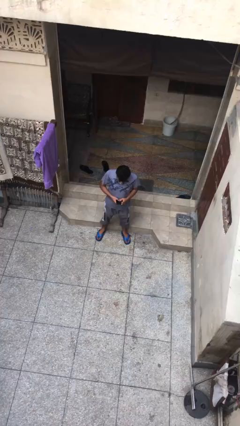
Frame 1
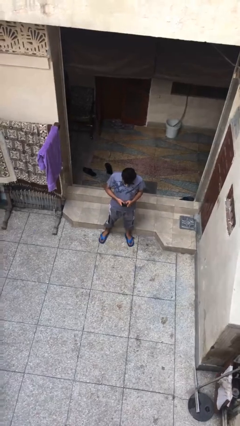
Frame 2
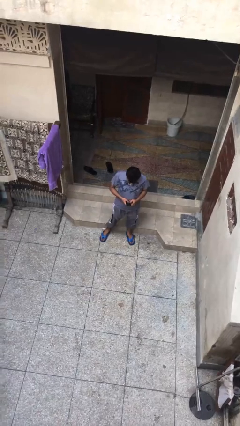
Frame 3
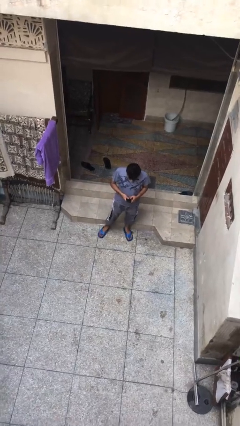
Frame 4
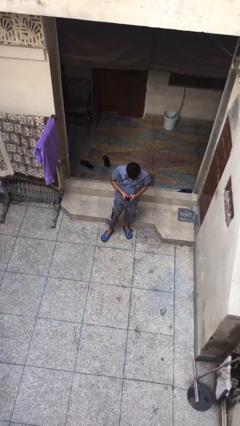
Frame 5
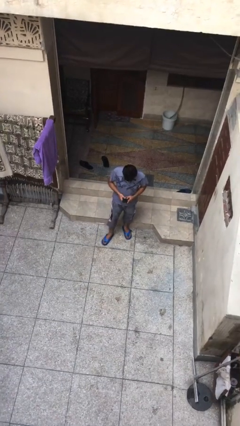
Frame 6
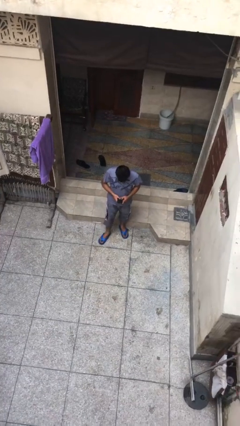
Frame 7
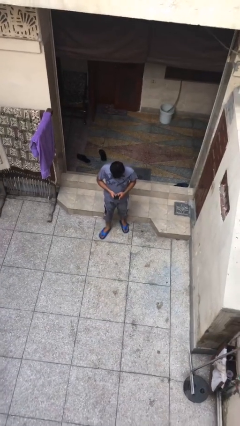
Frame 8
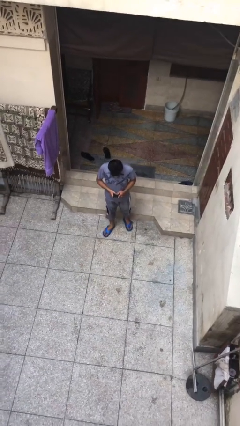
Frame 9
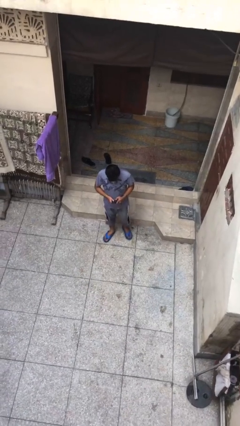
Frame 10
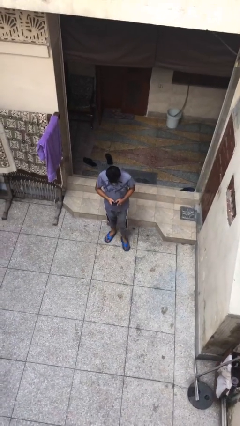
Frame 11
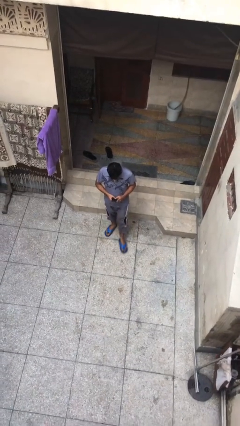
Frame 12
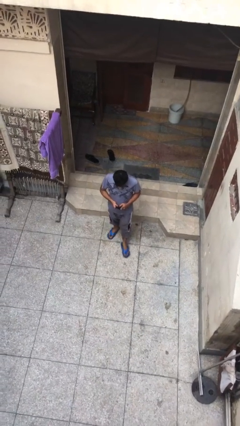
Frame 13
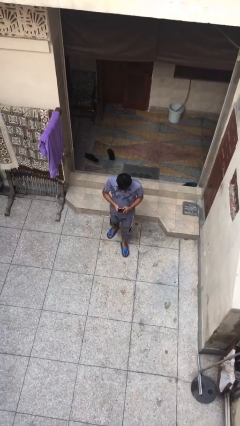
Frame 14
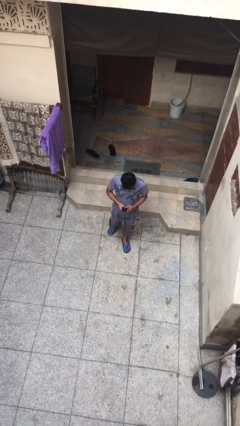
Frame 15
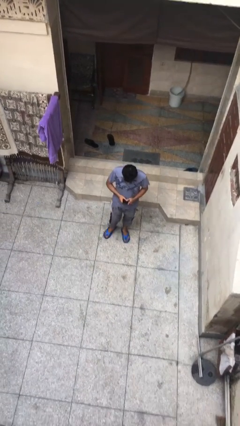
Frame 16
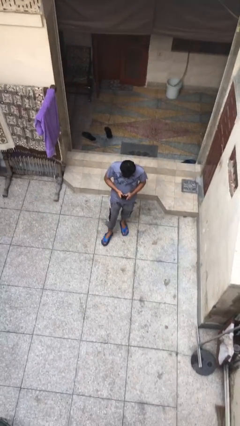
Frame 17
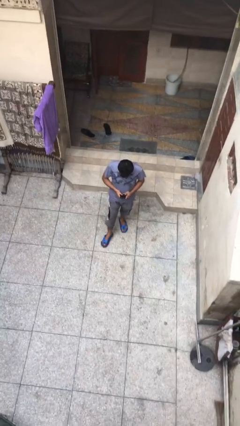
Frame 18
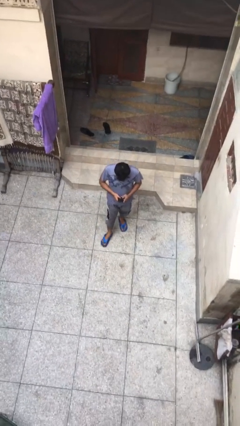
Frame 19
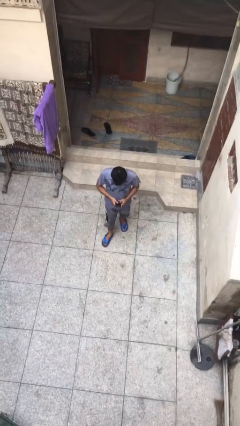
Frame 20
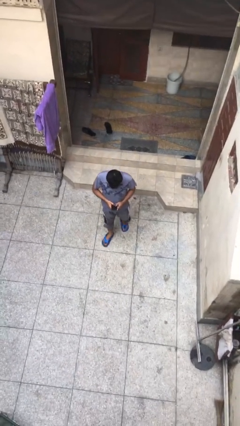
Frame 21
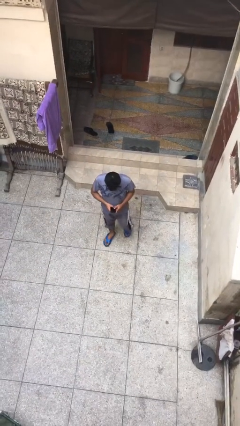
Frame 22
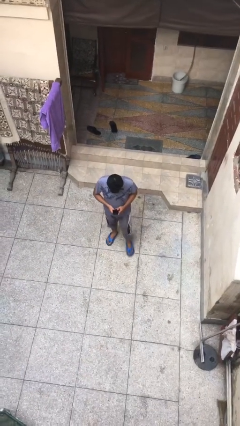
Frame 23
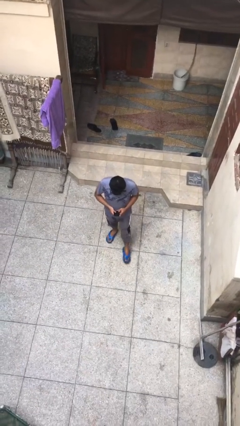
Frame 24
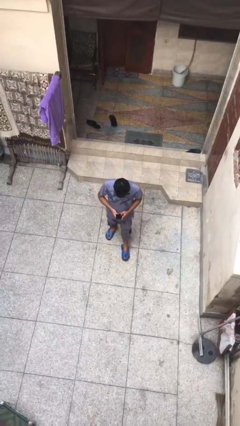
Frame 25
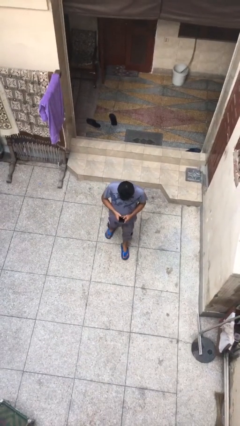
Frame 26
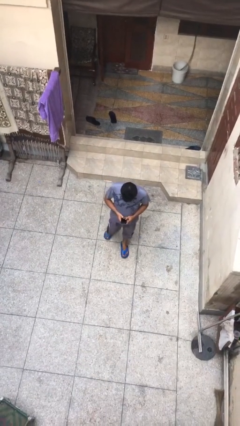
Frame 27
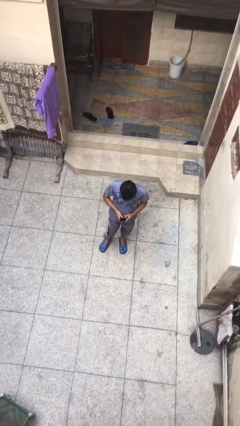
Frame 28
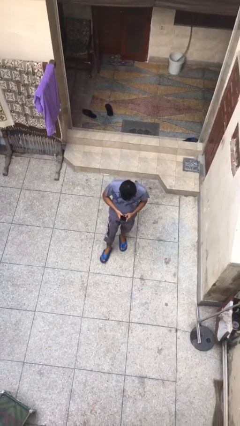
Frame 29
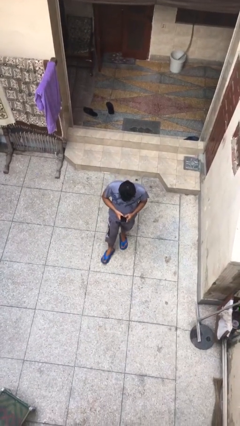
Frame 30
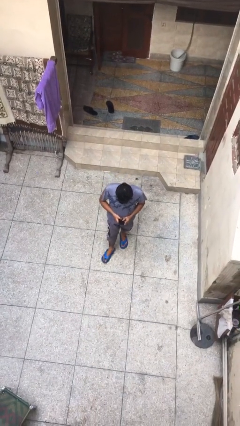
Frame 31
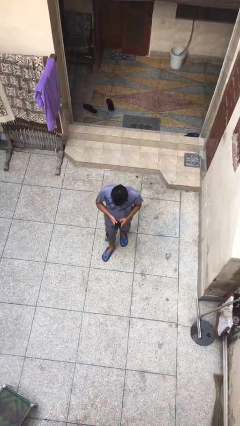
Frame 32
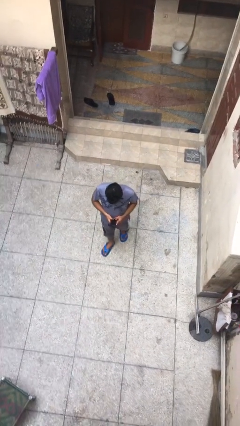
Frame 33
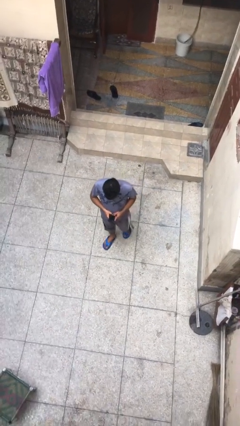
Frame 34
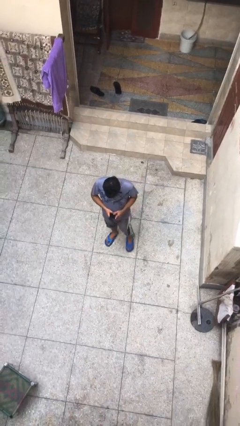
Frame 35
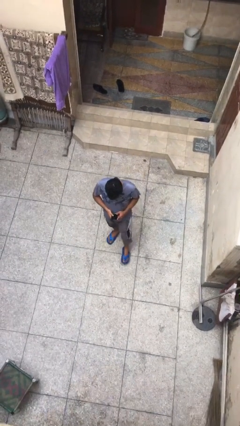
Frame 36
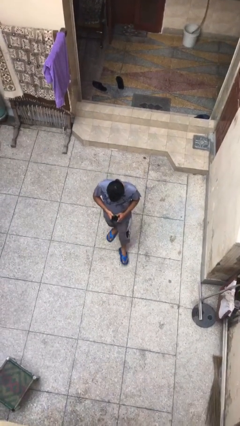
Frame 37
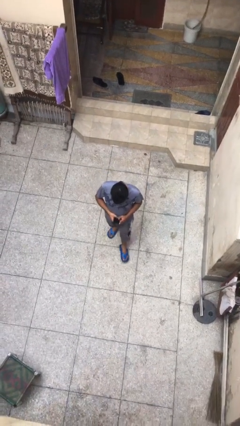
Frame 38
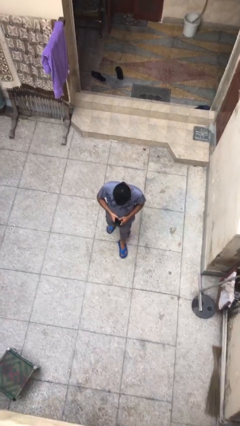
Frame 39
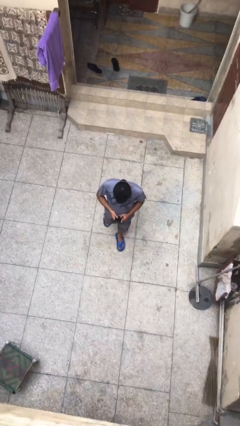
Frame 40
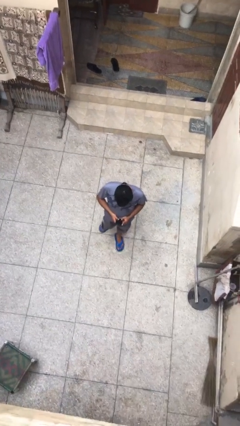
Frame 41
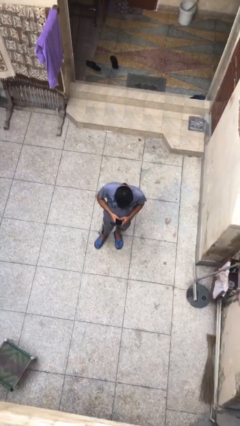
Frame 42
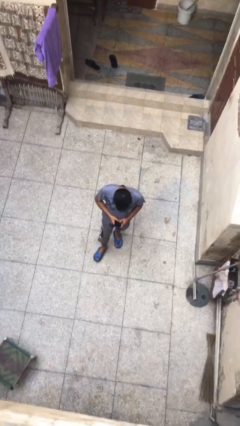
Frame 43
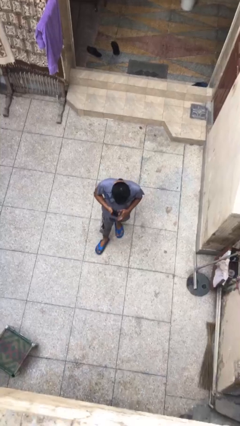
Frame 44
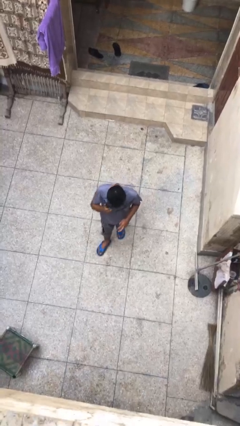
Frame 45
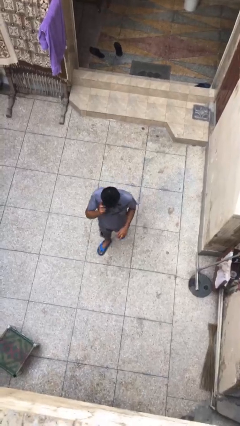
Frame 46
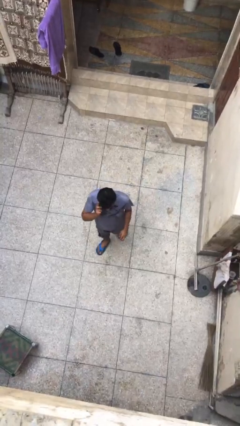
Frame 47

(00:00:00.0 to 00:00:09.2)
person texts on phone

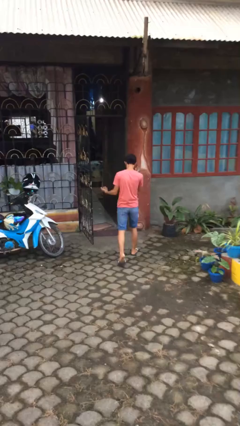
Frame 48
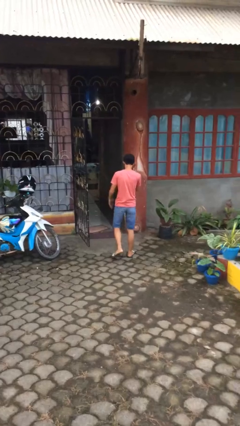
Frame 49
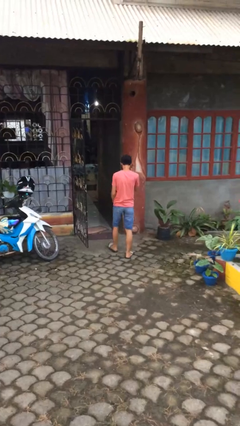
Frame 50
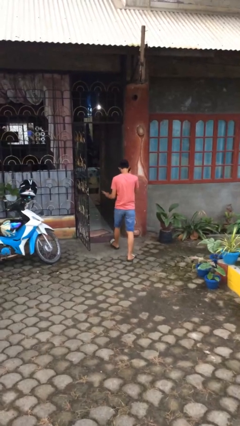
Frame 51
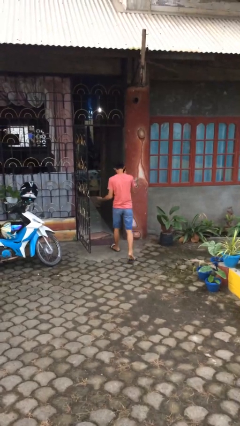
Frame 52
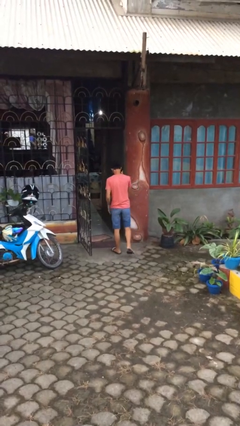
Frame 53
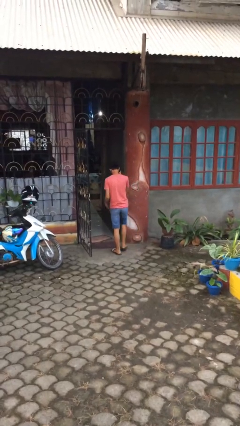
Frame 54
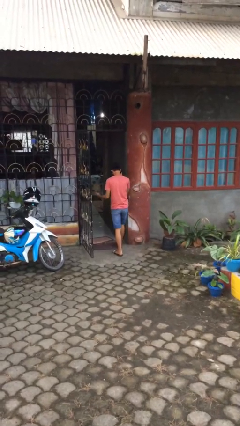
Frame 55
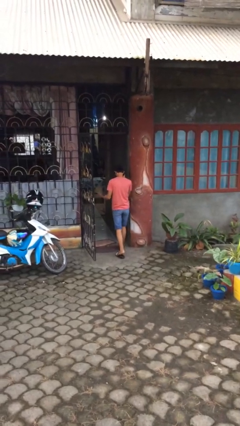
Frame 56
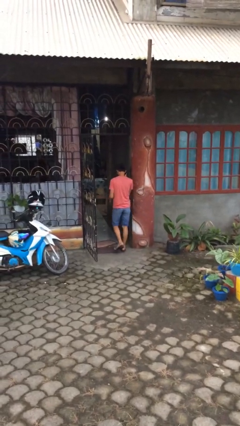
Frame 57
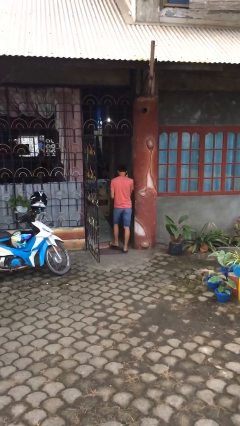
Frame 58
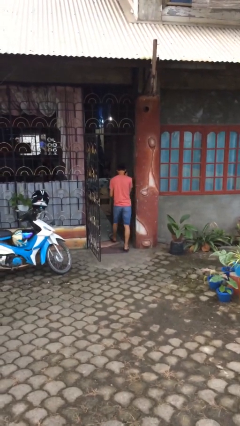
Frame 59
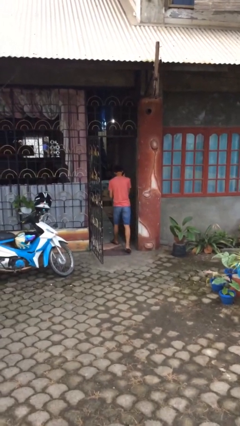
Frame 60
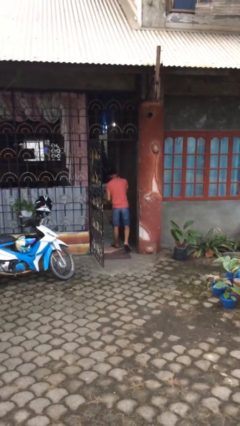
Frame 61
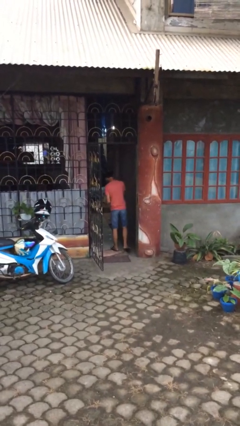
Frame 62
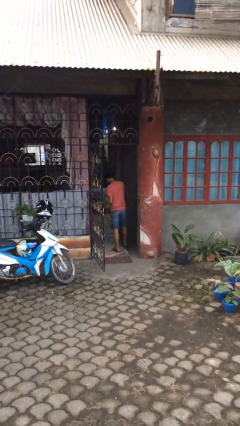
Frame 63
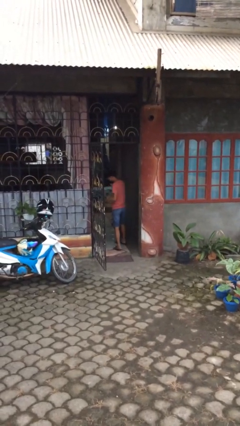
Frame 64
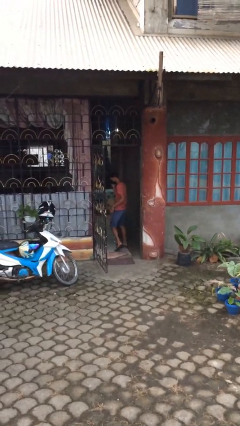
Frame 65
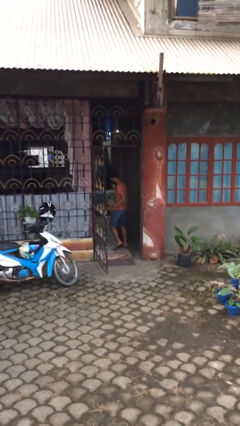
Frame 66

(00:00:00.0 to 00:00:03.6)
person exits scene through structure

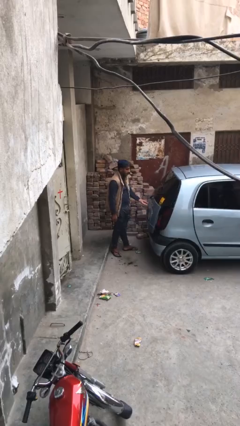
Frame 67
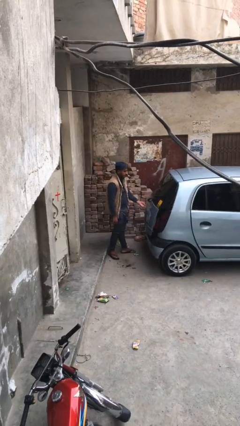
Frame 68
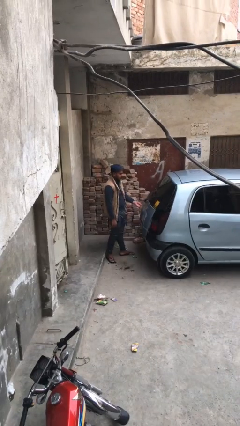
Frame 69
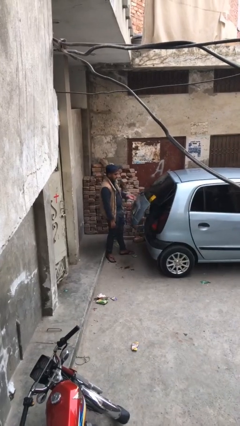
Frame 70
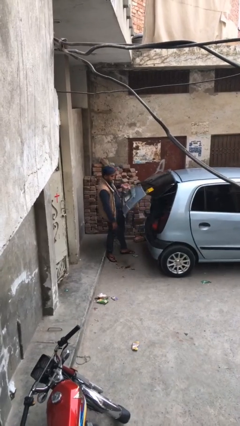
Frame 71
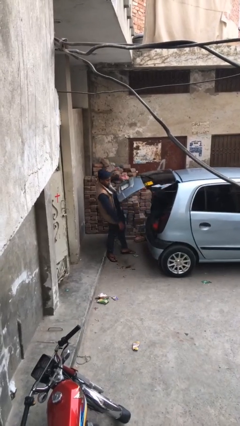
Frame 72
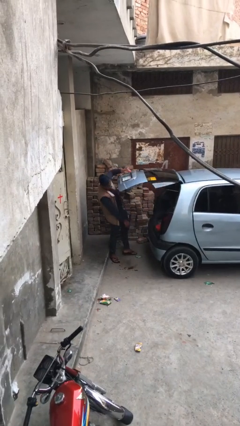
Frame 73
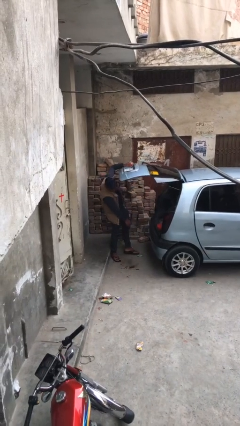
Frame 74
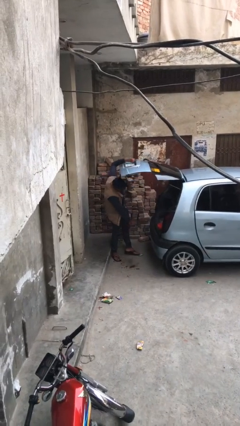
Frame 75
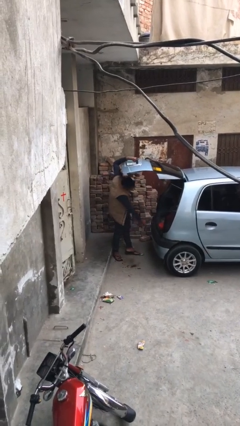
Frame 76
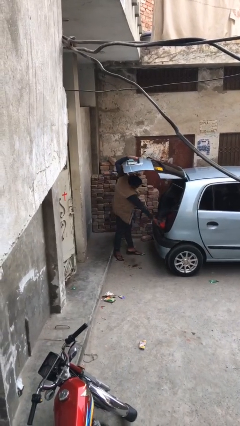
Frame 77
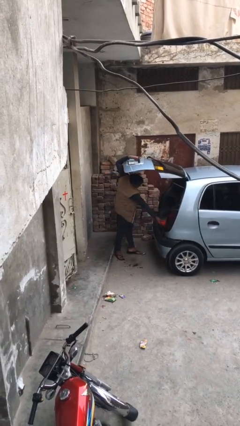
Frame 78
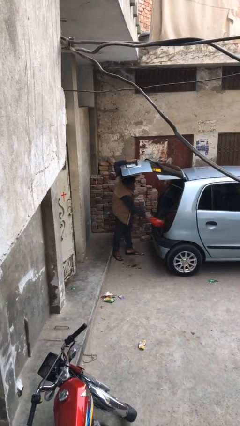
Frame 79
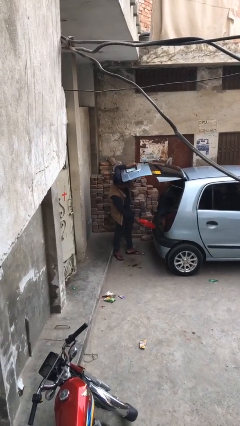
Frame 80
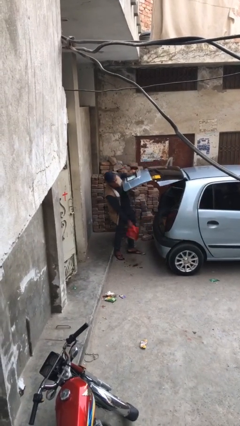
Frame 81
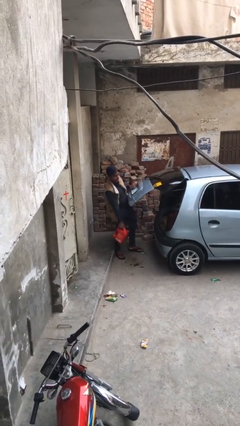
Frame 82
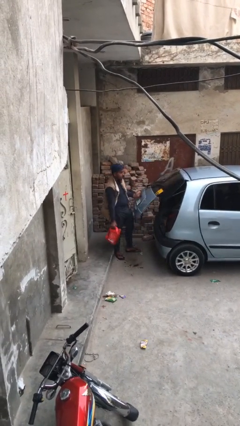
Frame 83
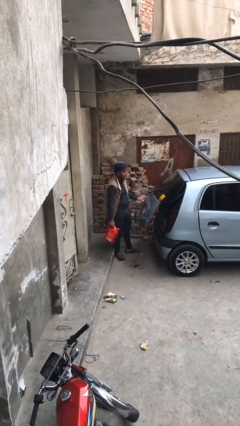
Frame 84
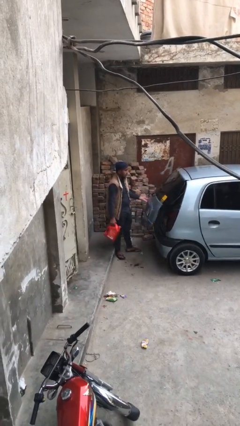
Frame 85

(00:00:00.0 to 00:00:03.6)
person unloads car

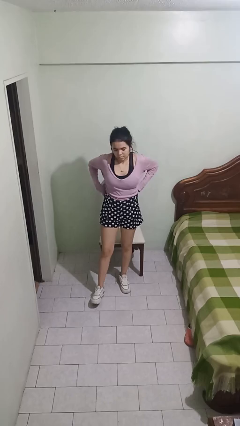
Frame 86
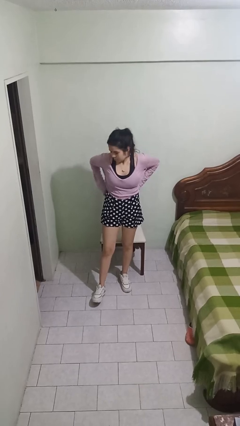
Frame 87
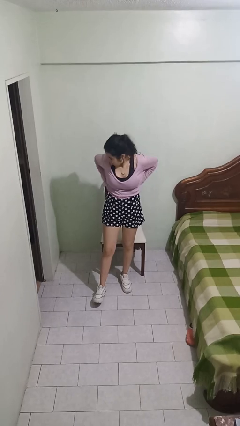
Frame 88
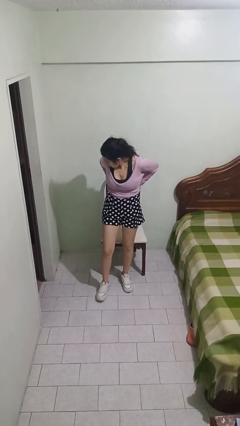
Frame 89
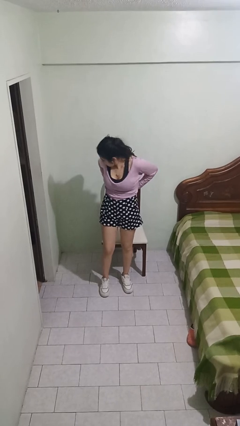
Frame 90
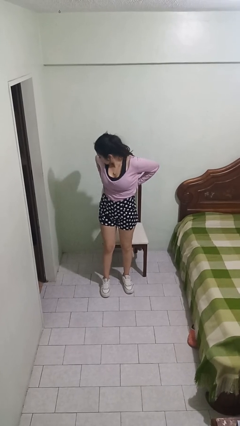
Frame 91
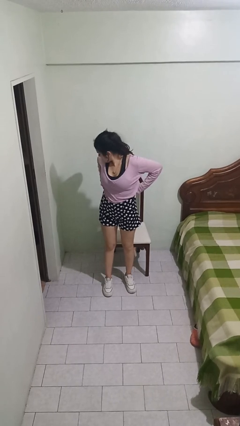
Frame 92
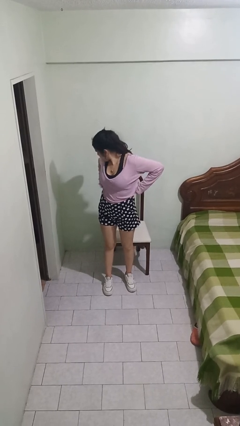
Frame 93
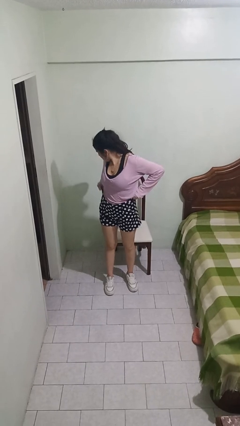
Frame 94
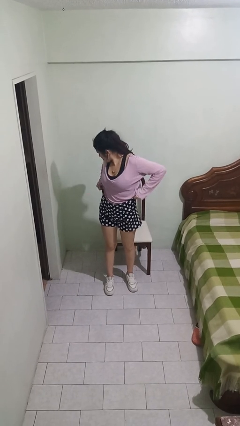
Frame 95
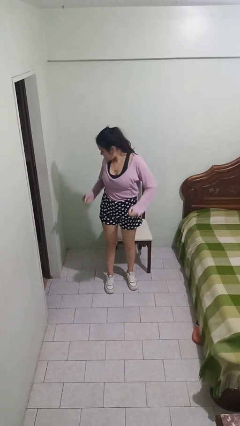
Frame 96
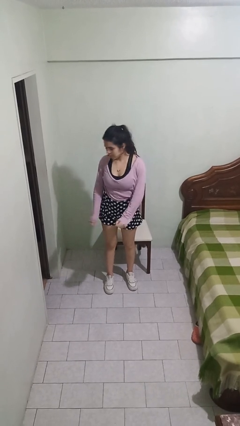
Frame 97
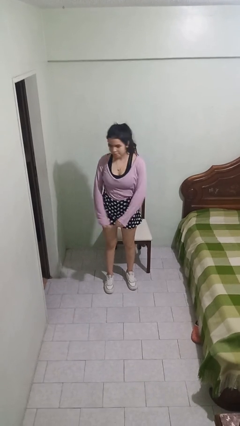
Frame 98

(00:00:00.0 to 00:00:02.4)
person hikes up pants
